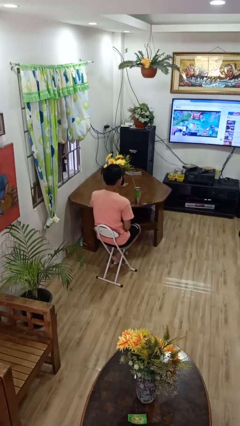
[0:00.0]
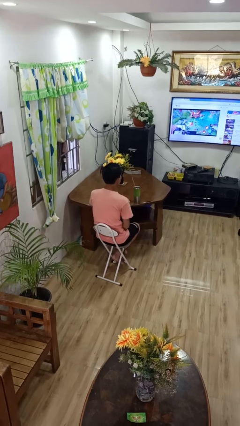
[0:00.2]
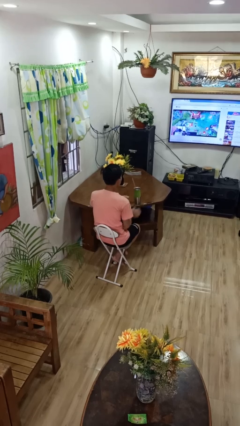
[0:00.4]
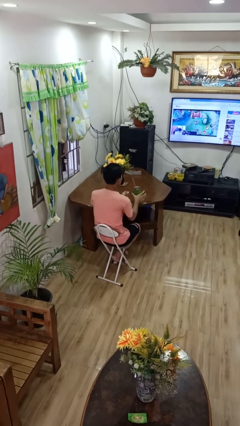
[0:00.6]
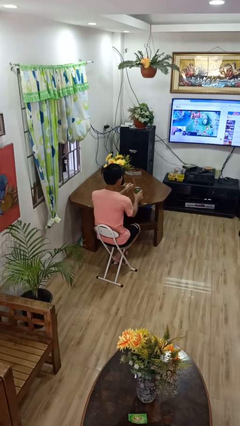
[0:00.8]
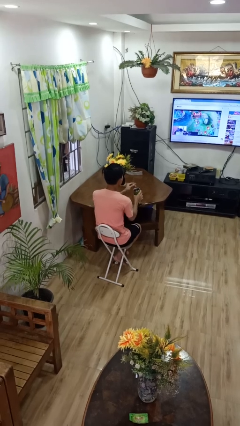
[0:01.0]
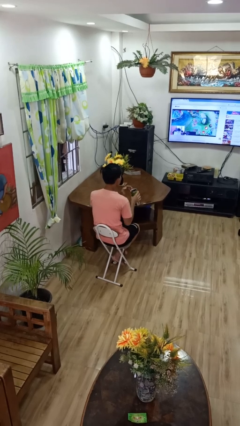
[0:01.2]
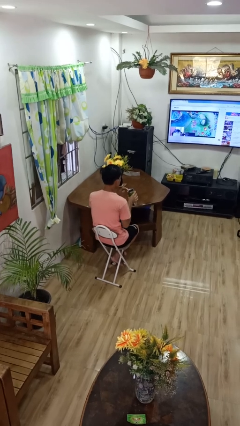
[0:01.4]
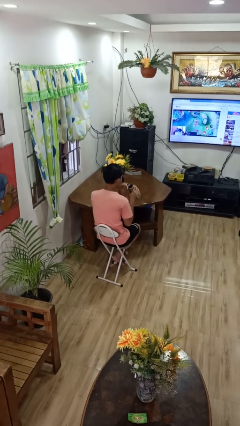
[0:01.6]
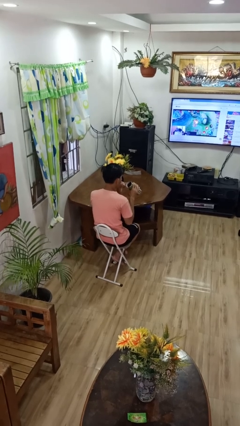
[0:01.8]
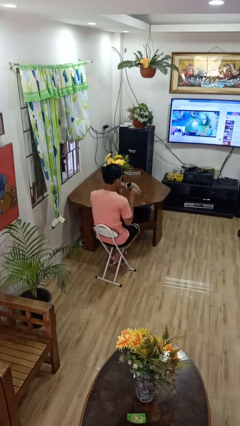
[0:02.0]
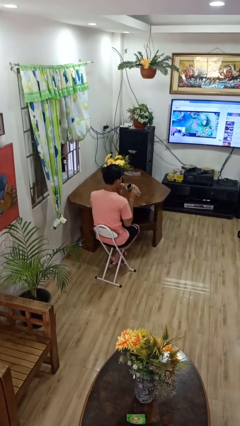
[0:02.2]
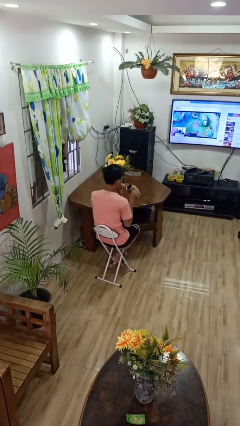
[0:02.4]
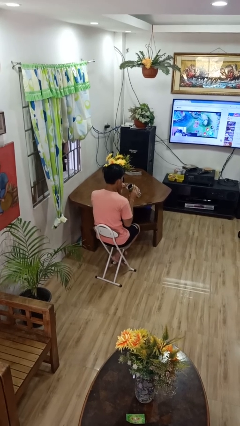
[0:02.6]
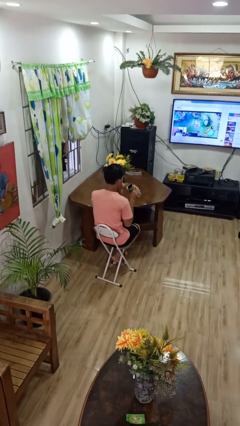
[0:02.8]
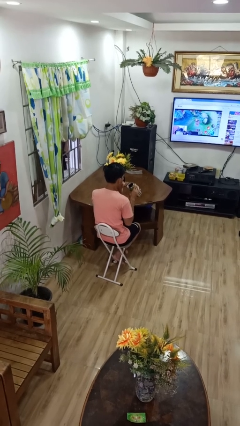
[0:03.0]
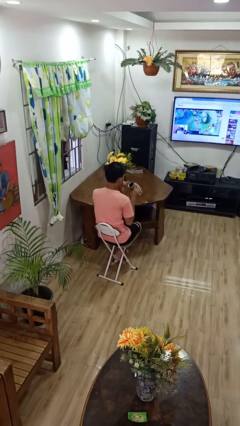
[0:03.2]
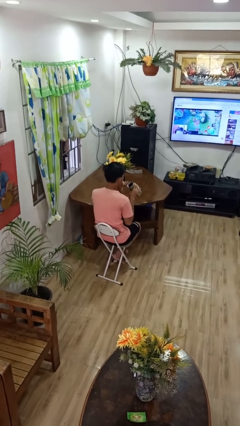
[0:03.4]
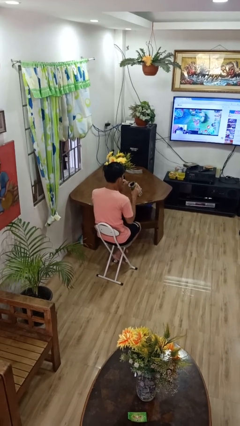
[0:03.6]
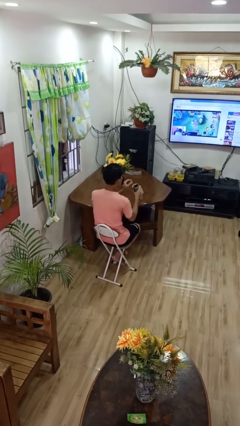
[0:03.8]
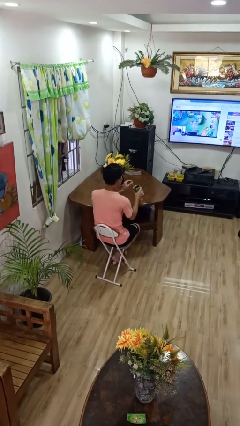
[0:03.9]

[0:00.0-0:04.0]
person drinks from straw

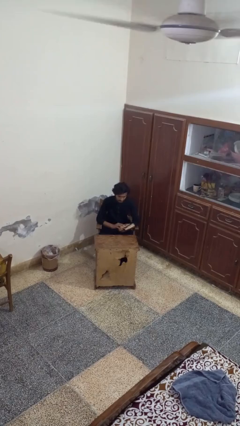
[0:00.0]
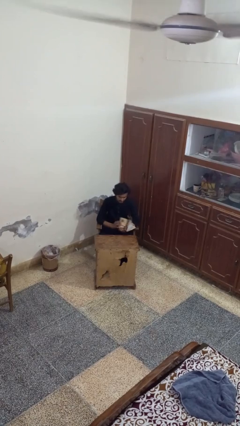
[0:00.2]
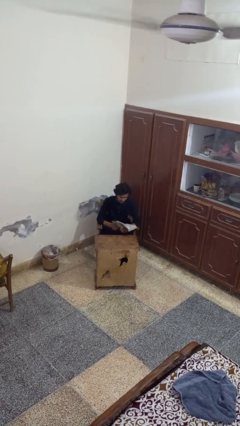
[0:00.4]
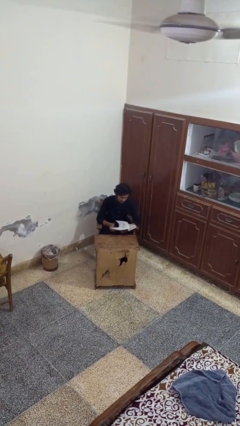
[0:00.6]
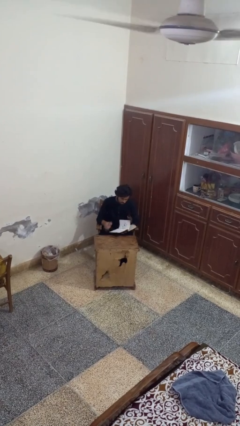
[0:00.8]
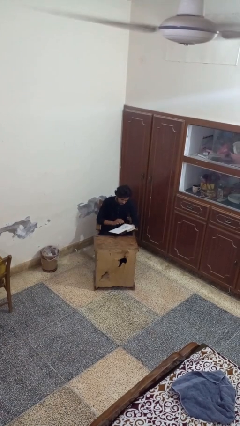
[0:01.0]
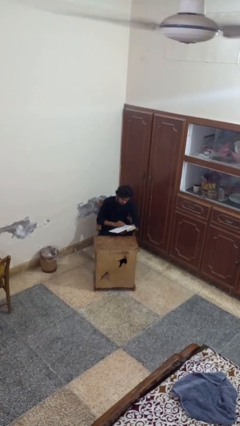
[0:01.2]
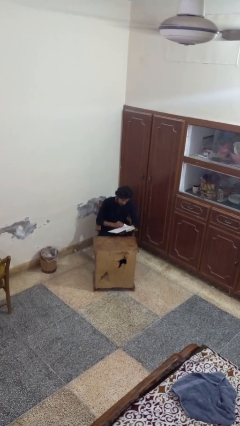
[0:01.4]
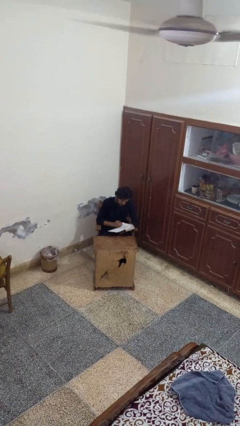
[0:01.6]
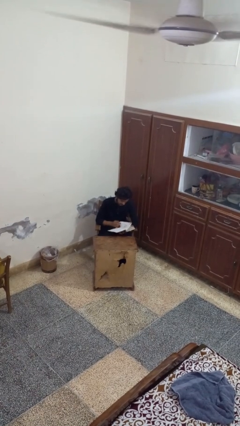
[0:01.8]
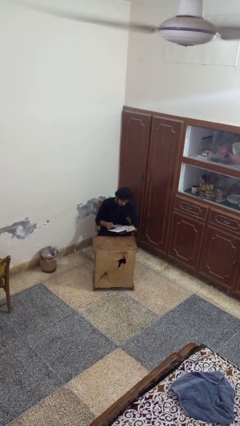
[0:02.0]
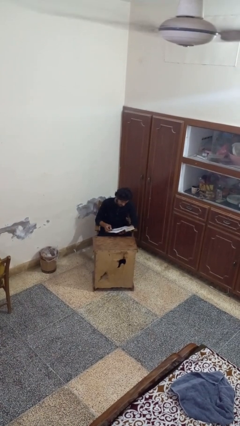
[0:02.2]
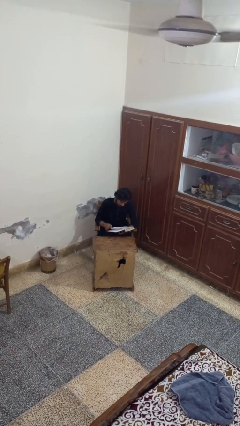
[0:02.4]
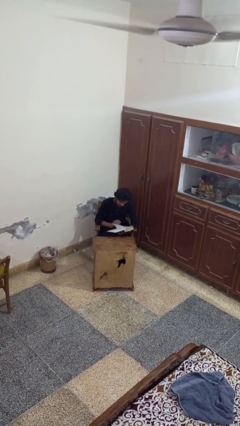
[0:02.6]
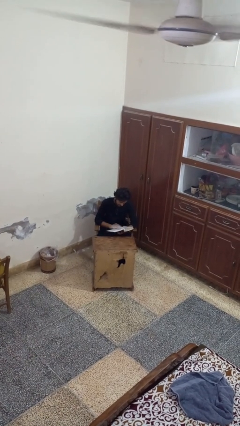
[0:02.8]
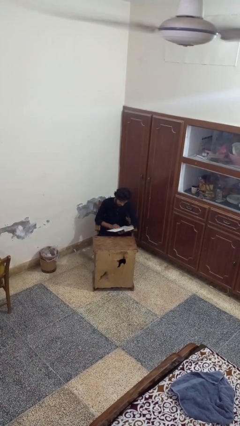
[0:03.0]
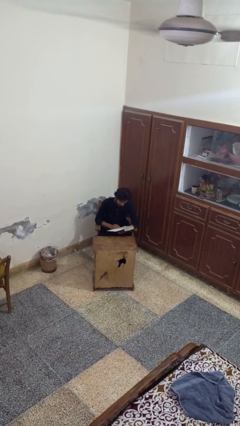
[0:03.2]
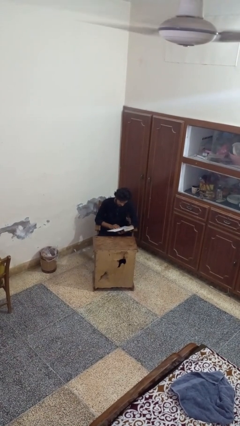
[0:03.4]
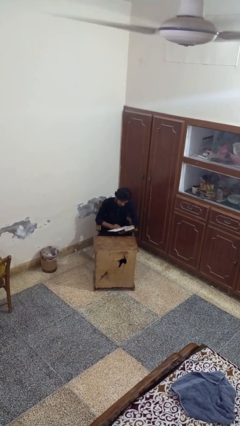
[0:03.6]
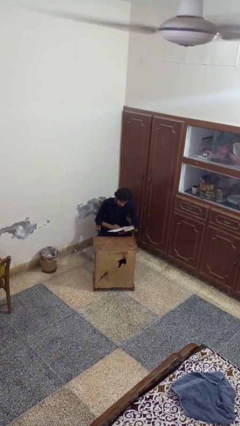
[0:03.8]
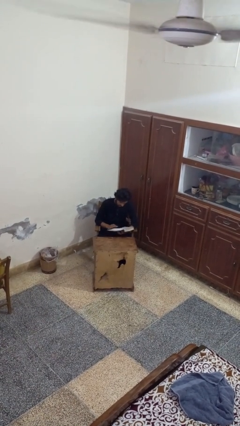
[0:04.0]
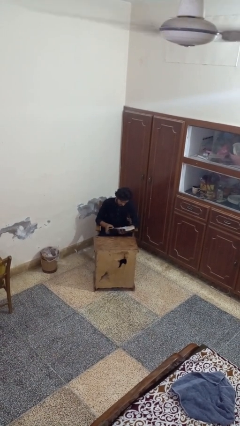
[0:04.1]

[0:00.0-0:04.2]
person reads book

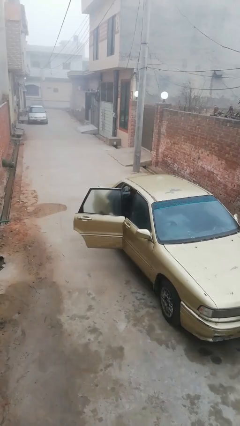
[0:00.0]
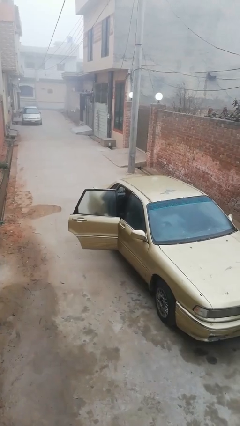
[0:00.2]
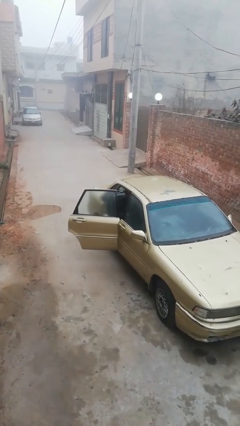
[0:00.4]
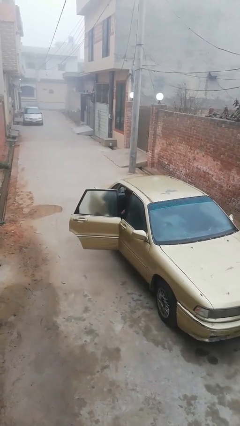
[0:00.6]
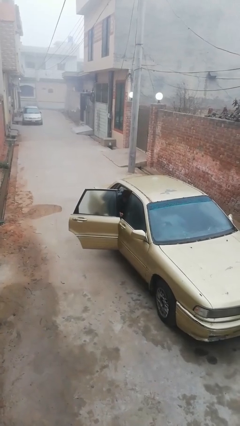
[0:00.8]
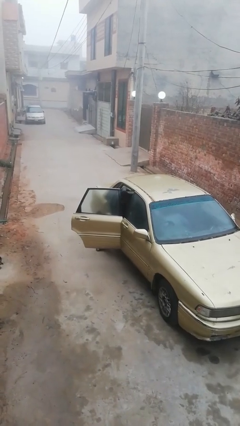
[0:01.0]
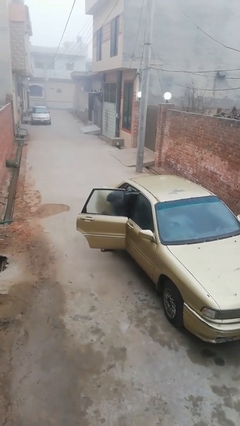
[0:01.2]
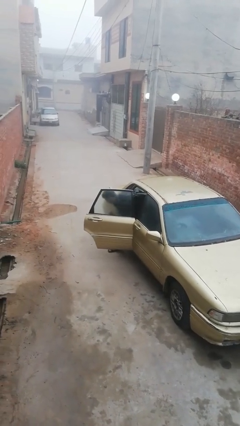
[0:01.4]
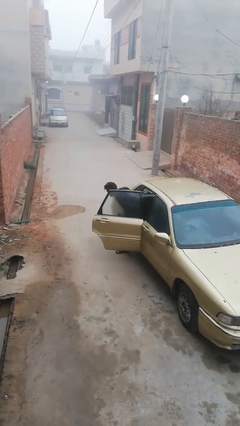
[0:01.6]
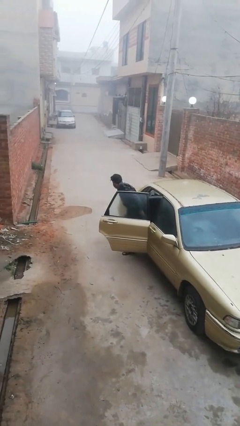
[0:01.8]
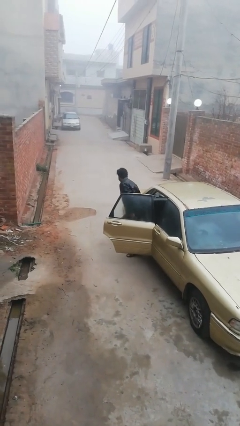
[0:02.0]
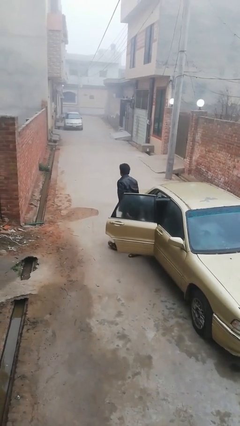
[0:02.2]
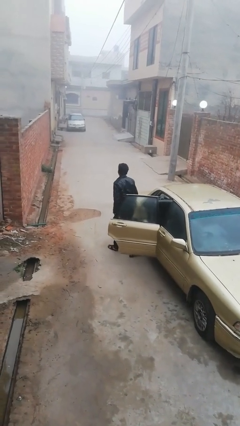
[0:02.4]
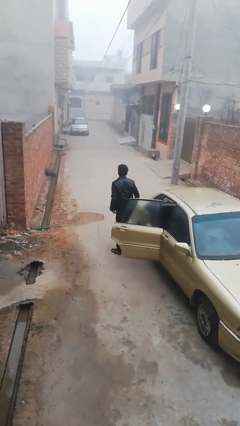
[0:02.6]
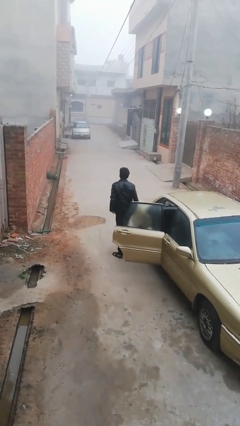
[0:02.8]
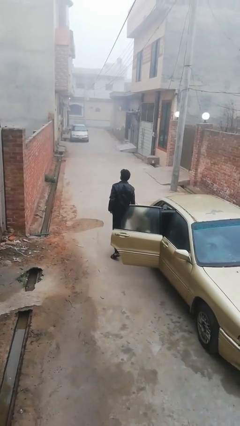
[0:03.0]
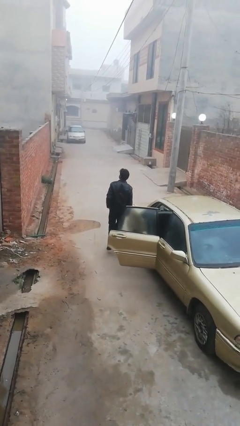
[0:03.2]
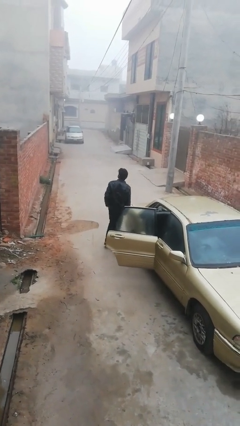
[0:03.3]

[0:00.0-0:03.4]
person exits car

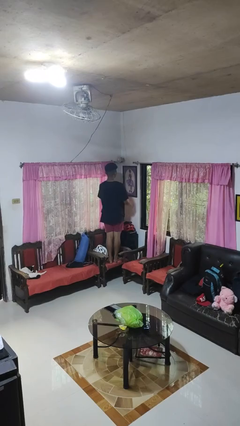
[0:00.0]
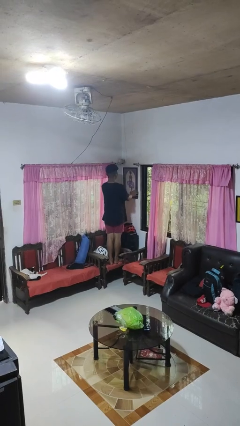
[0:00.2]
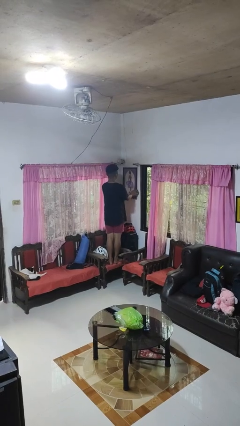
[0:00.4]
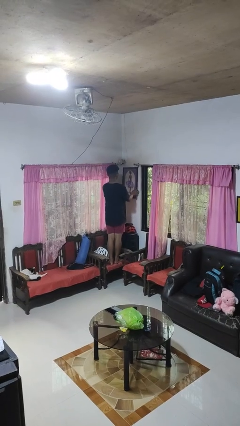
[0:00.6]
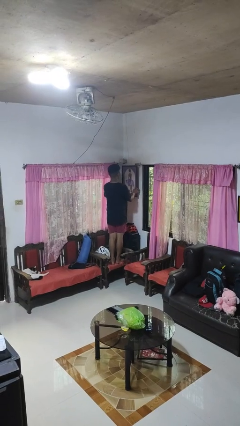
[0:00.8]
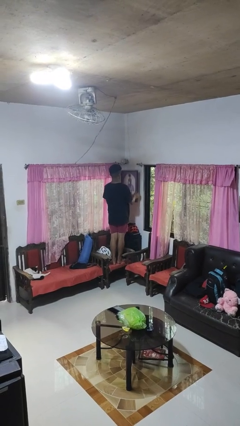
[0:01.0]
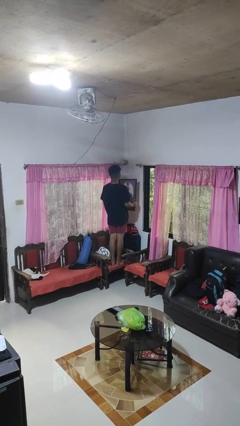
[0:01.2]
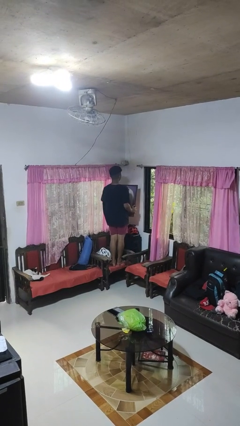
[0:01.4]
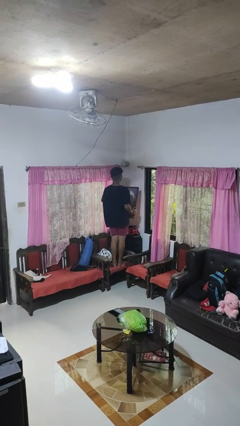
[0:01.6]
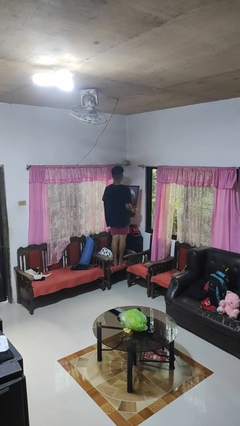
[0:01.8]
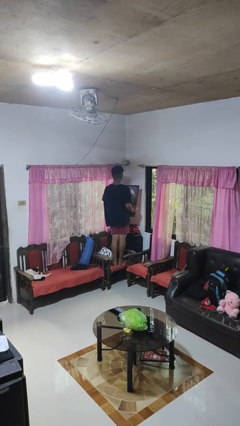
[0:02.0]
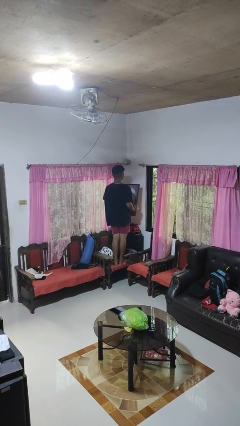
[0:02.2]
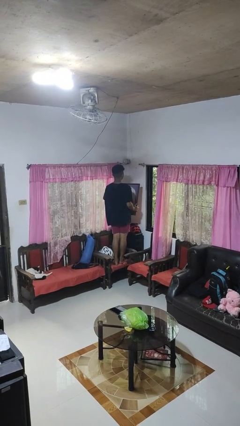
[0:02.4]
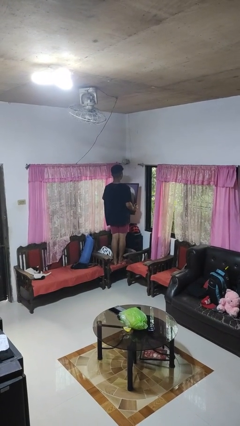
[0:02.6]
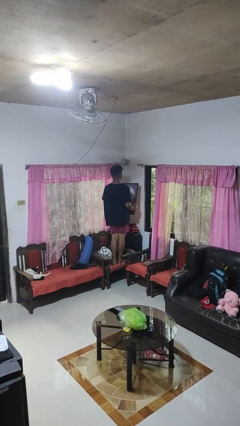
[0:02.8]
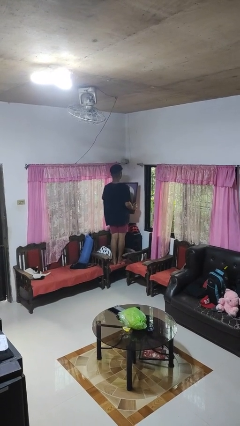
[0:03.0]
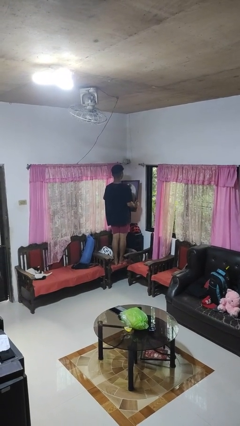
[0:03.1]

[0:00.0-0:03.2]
person takes down picture frame

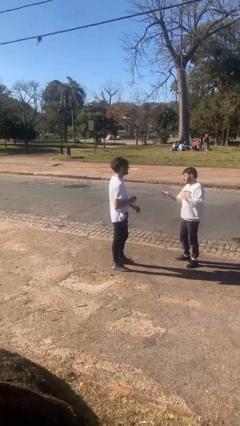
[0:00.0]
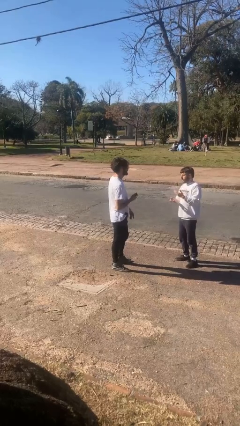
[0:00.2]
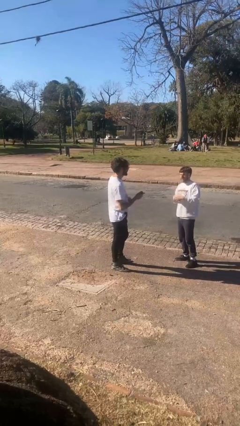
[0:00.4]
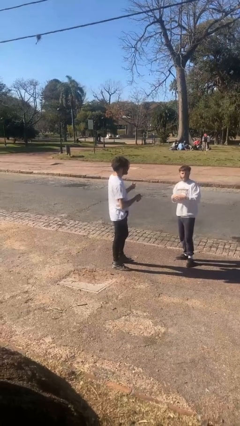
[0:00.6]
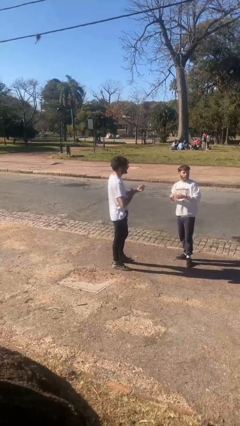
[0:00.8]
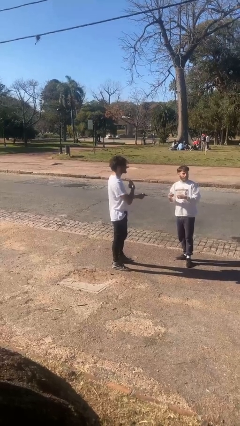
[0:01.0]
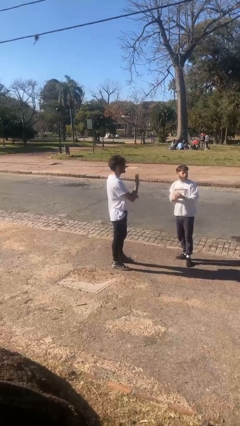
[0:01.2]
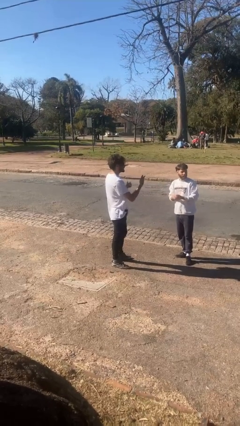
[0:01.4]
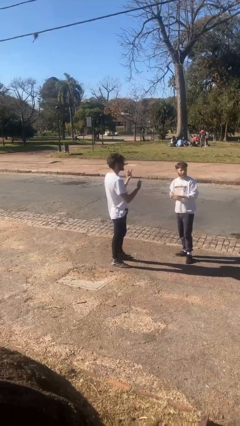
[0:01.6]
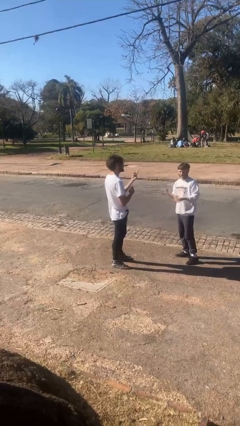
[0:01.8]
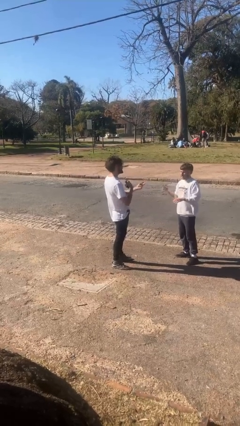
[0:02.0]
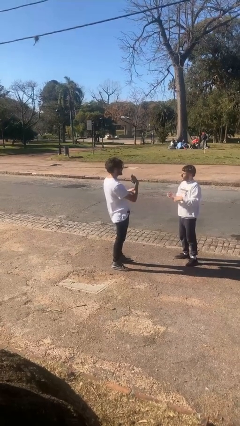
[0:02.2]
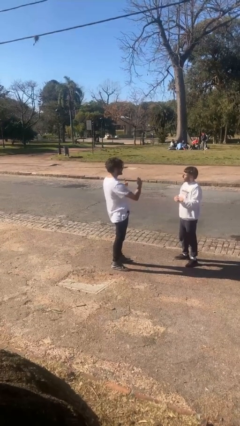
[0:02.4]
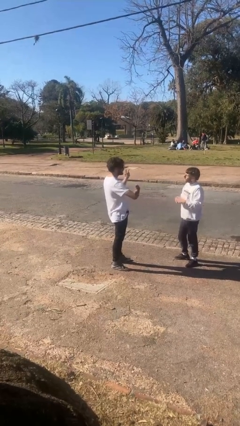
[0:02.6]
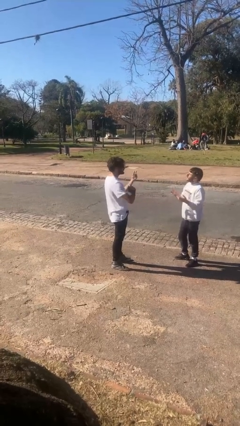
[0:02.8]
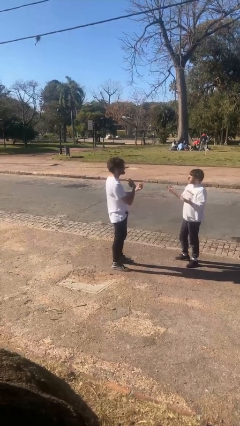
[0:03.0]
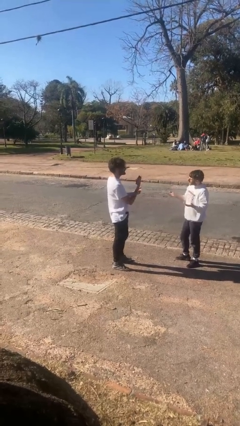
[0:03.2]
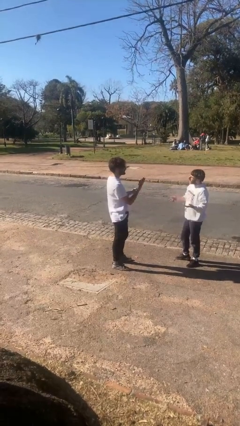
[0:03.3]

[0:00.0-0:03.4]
person talks to person
